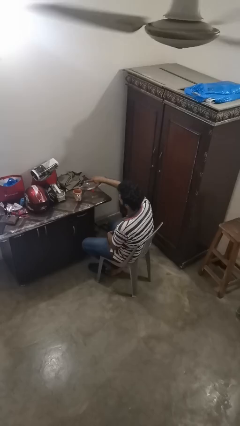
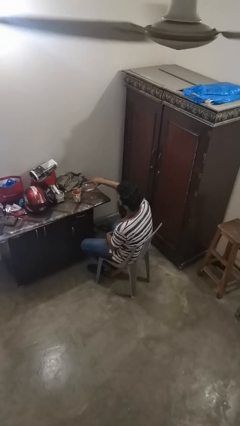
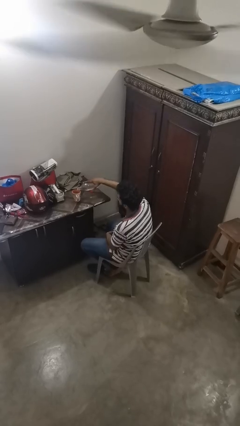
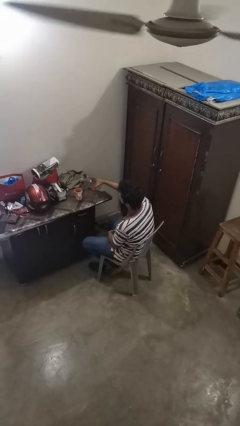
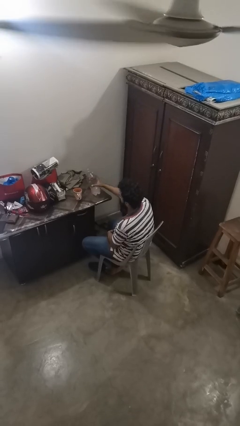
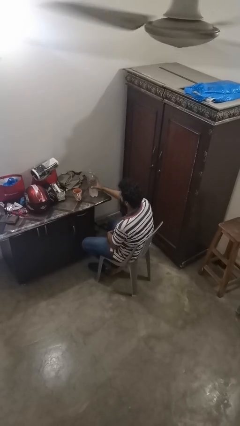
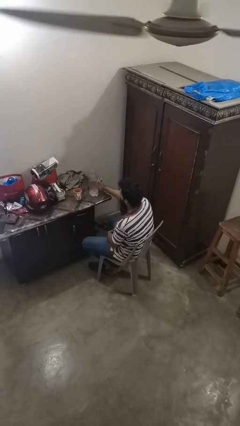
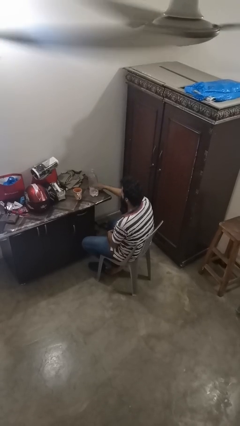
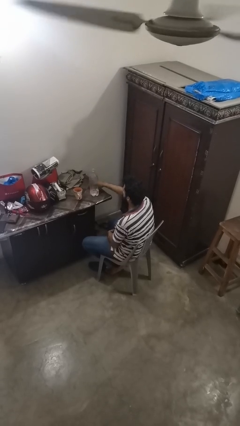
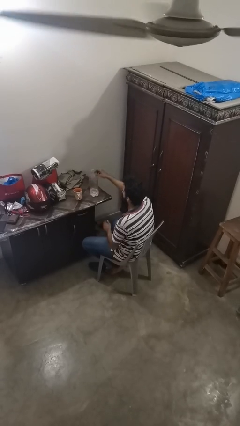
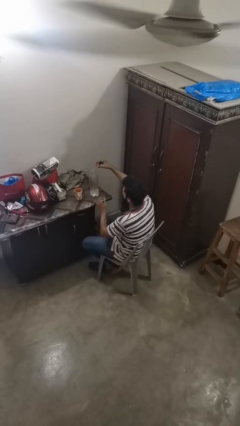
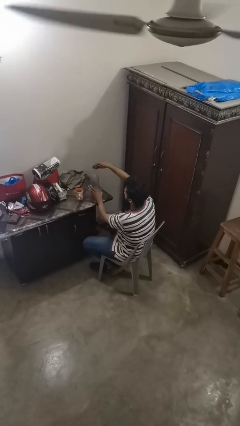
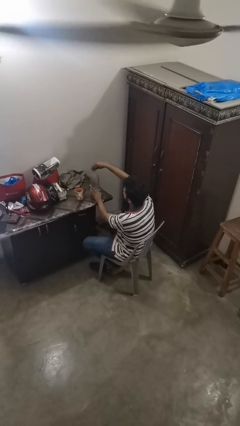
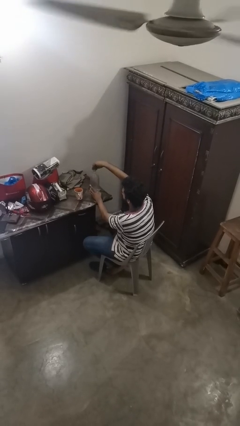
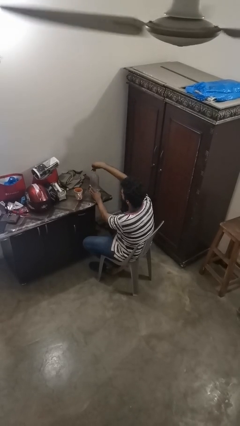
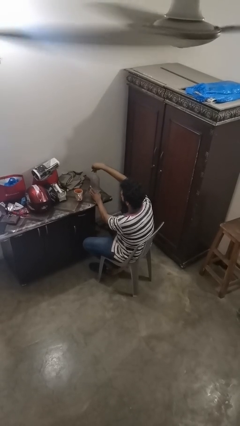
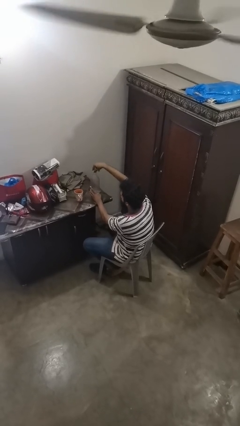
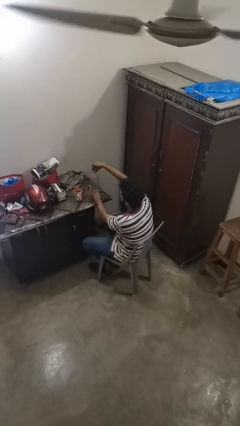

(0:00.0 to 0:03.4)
person screws lid to bottle

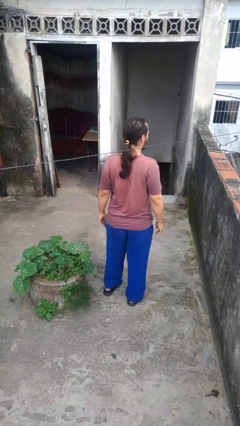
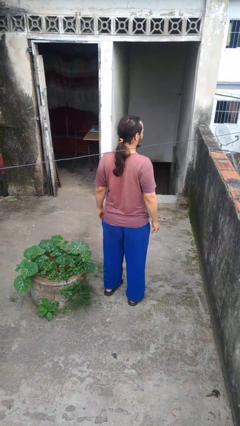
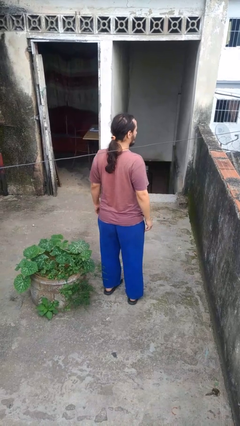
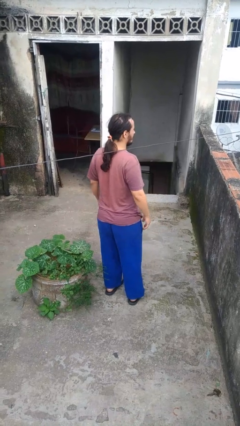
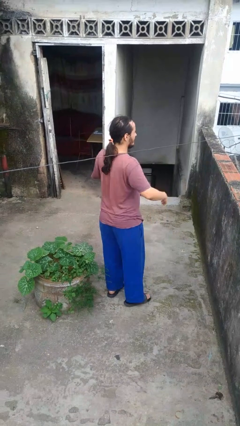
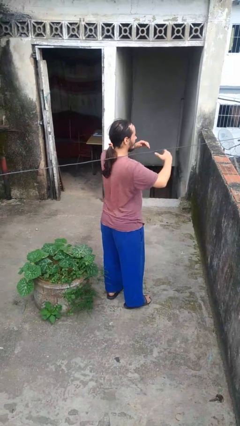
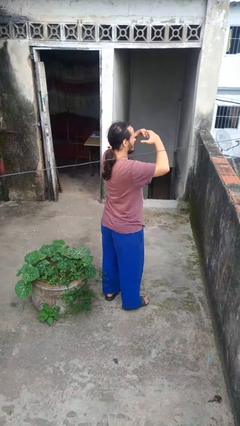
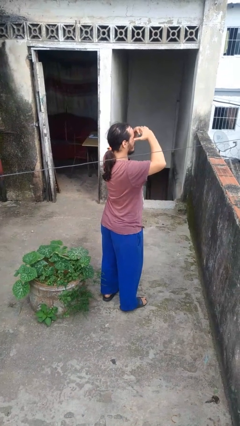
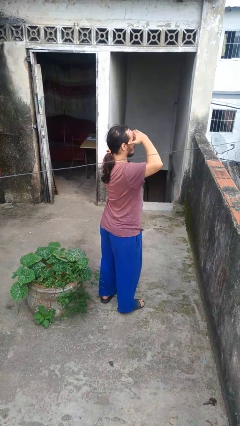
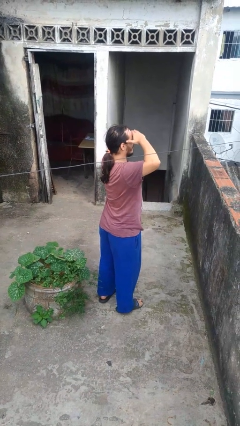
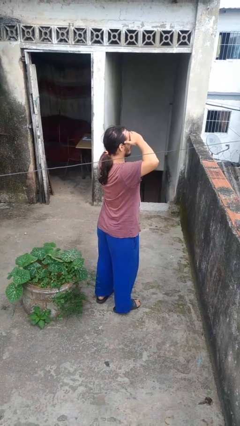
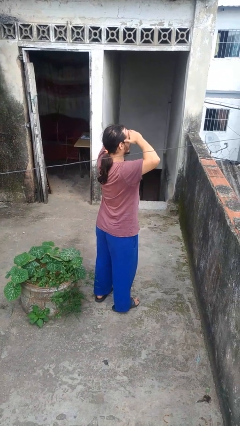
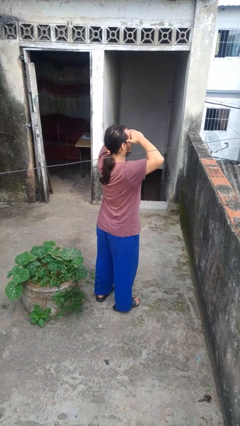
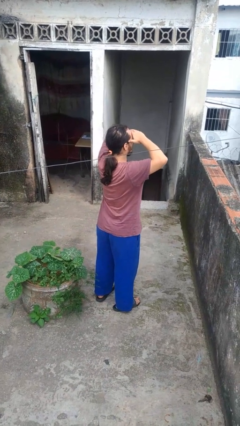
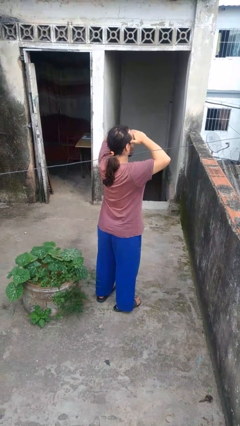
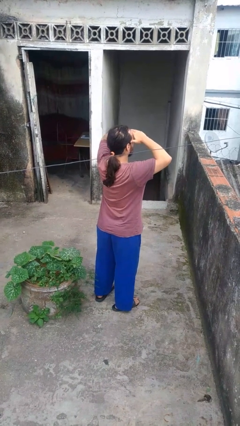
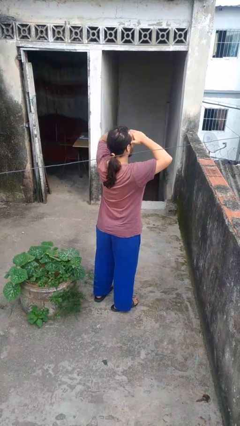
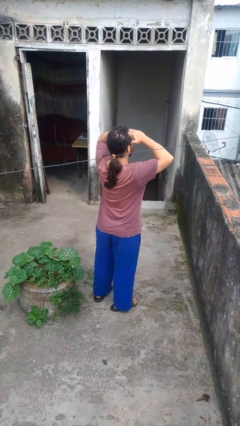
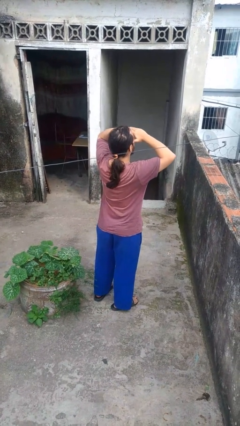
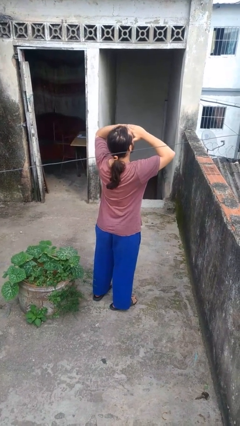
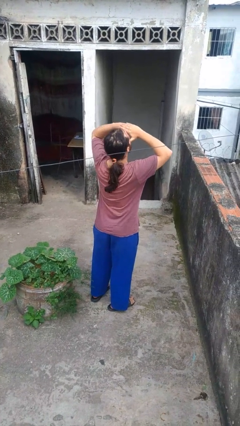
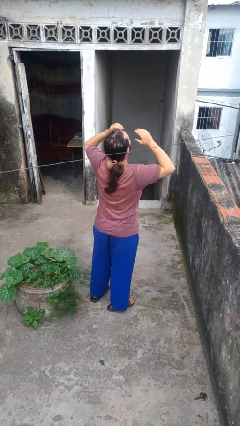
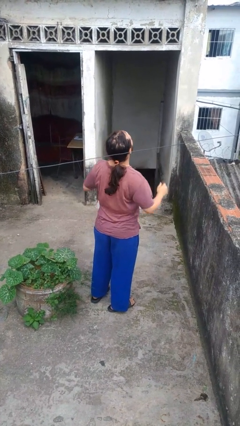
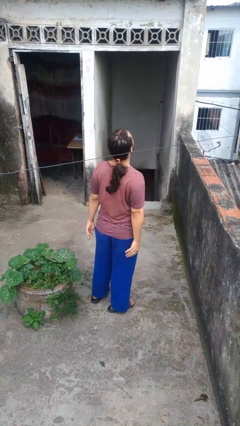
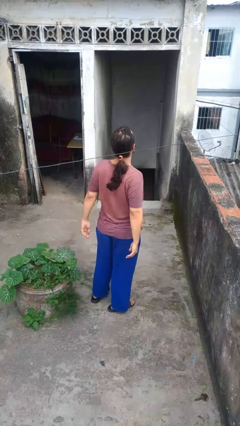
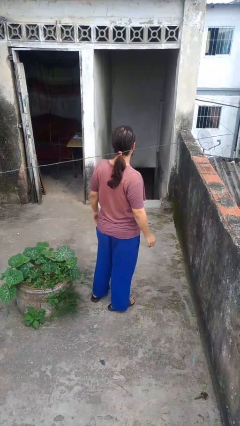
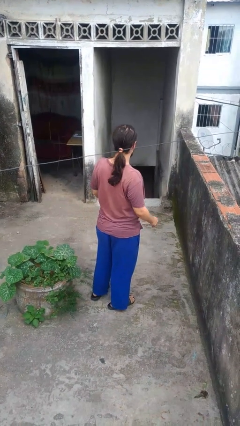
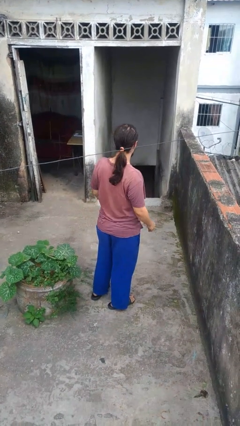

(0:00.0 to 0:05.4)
person shades eyes

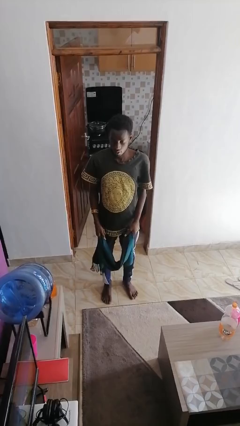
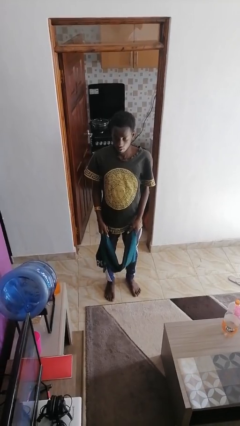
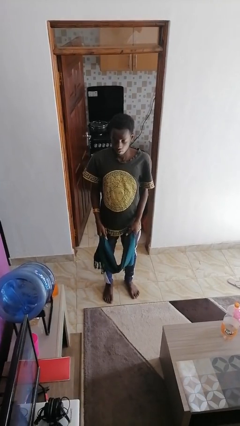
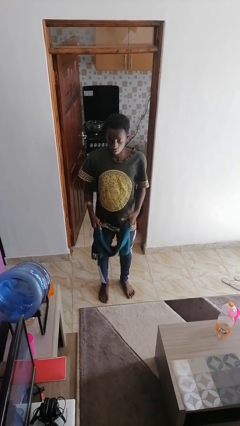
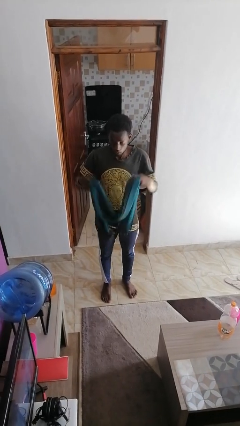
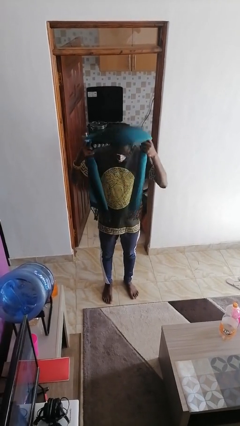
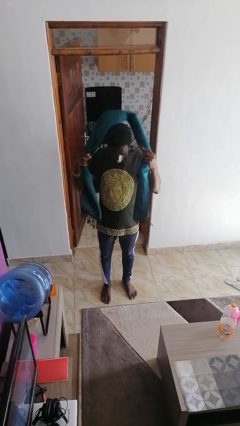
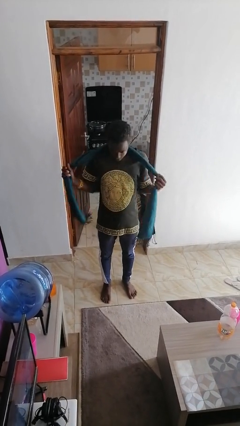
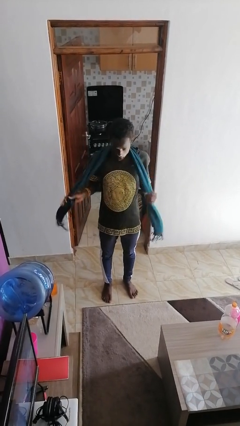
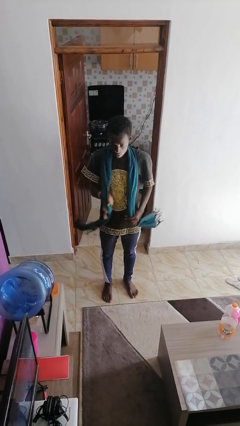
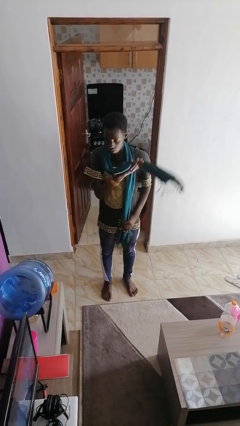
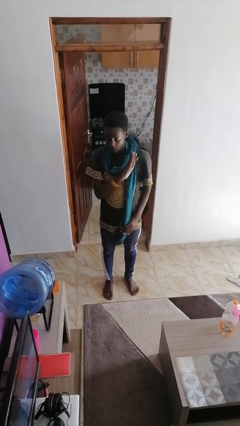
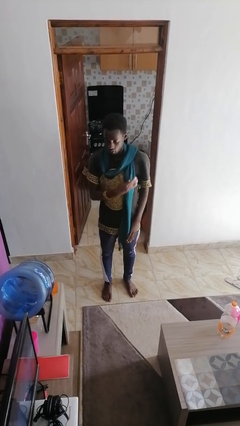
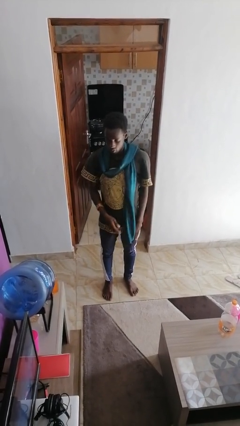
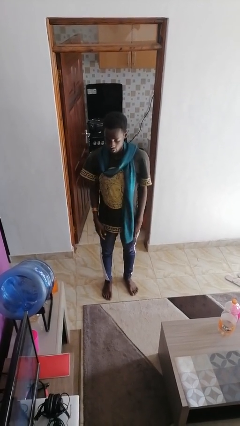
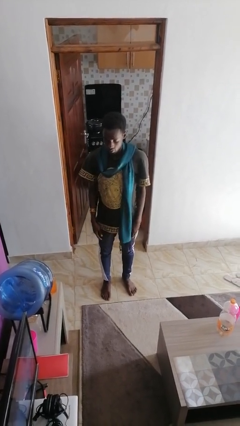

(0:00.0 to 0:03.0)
person puts on scarf

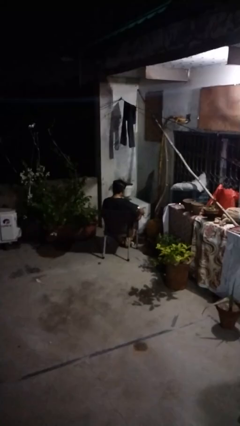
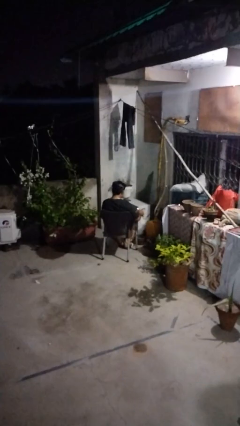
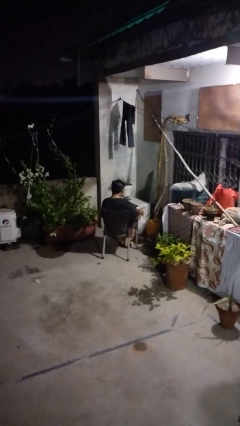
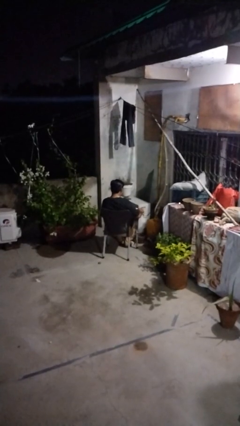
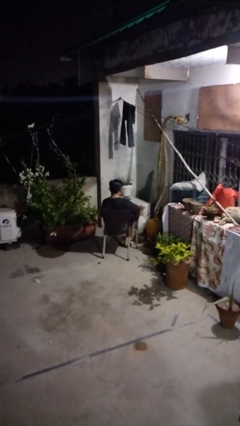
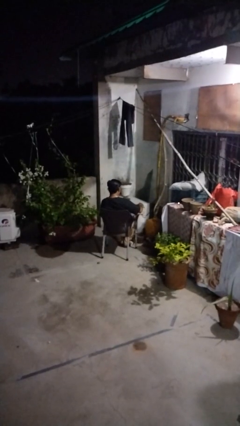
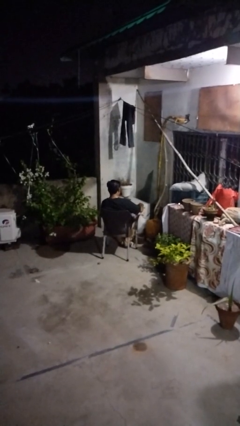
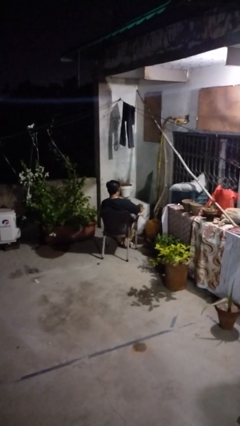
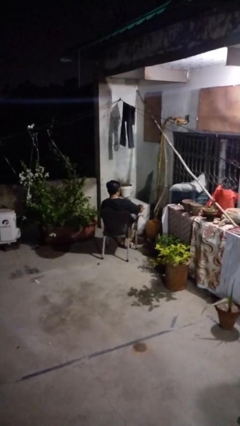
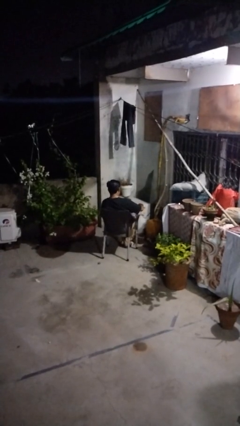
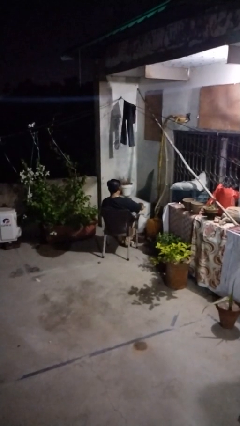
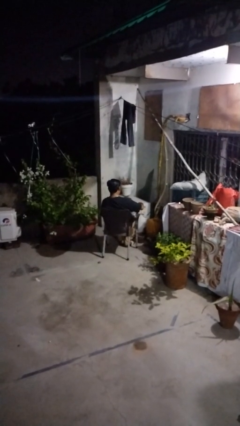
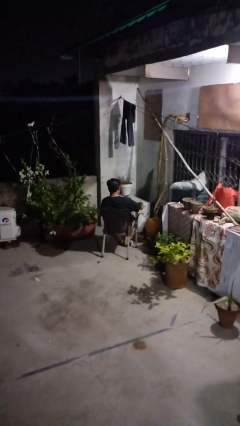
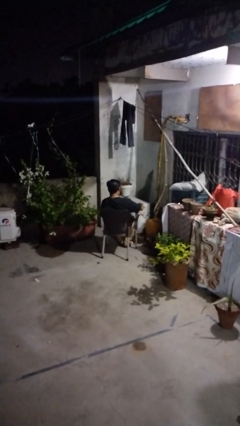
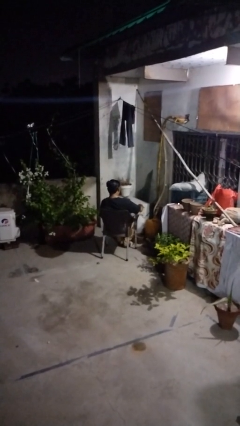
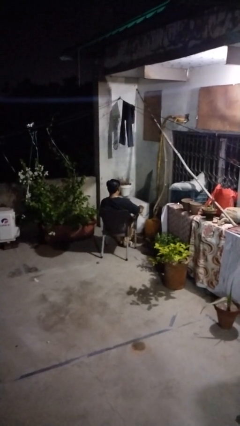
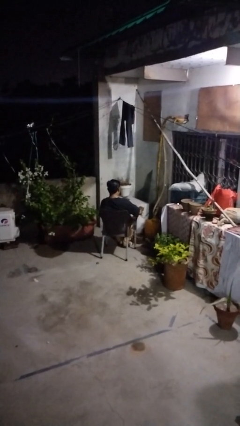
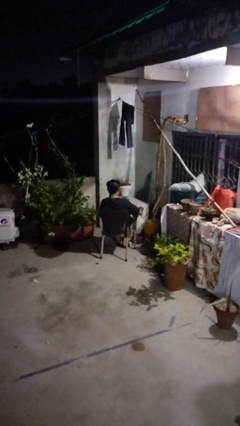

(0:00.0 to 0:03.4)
person pours coffee into mug

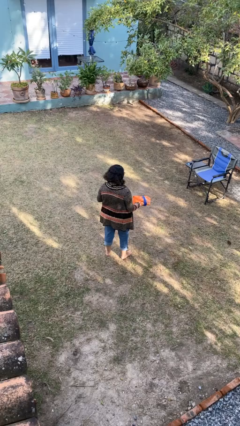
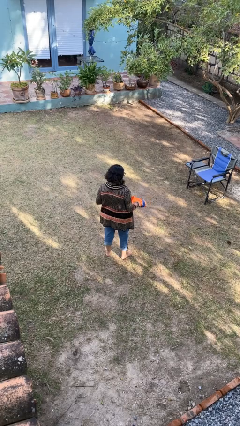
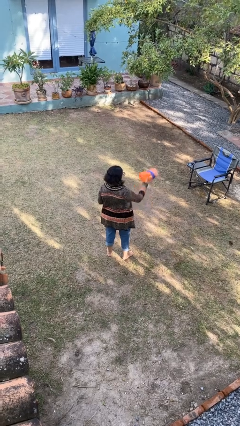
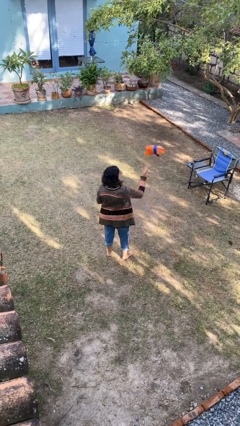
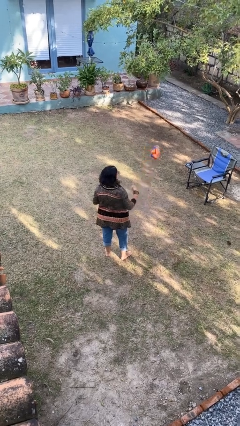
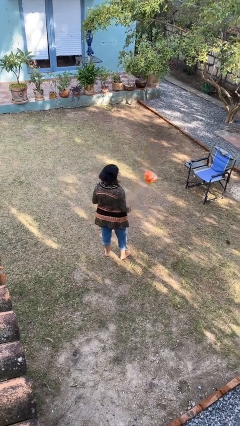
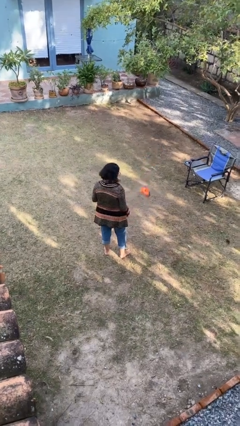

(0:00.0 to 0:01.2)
person throws object into air

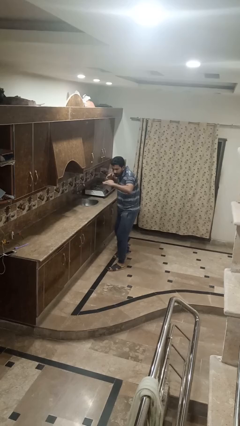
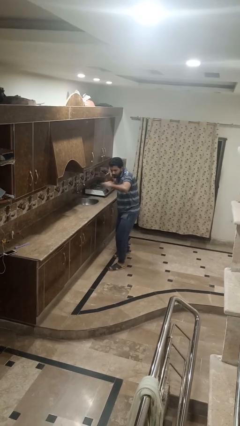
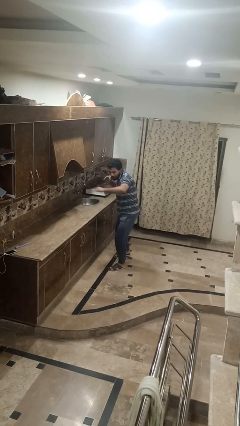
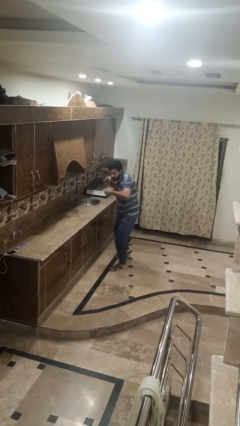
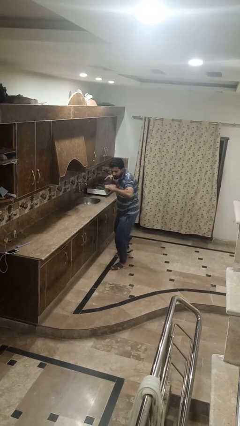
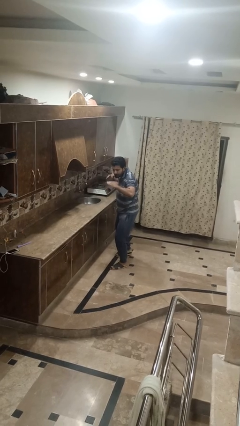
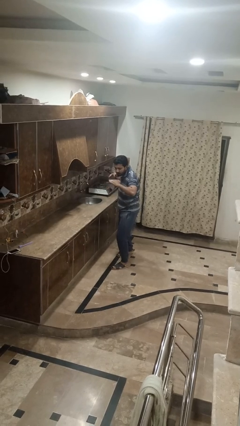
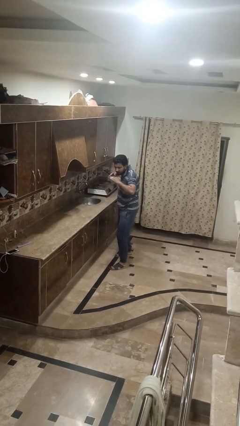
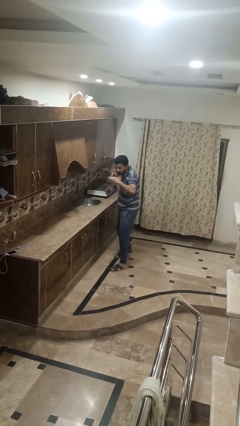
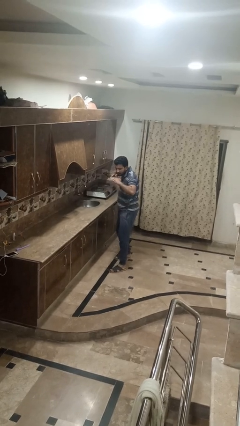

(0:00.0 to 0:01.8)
person karate chop
